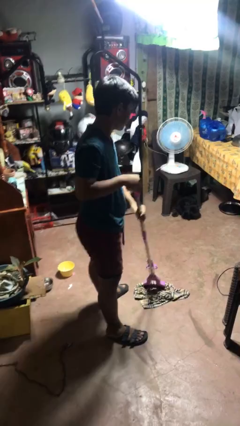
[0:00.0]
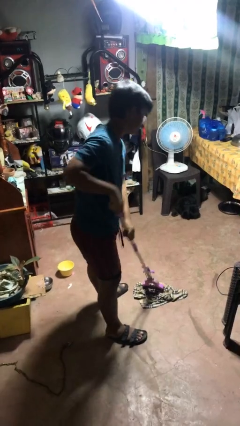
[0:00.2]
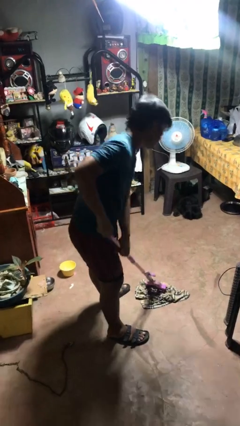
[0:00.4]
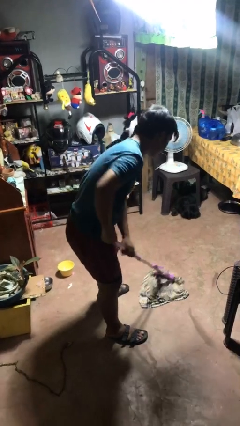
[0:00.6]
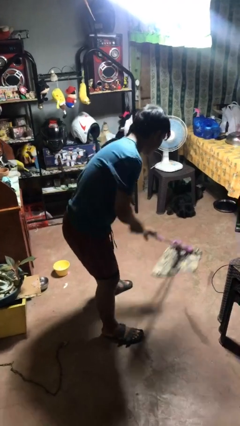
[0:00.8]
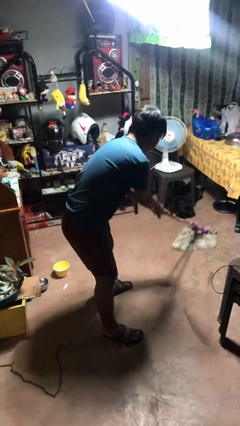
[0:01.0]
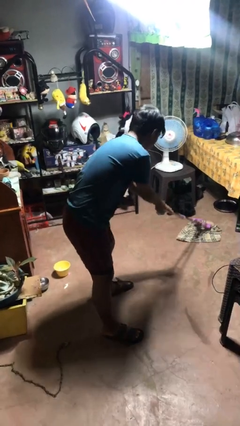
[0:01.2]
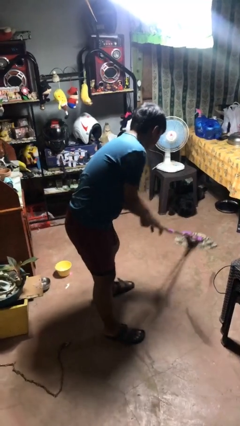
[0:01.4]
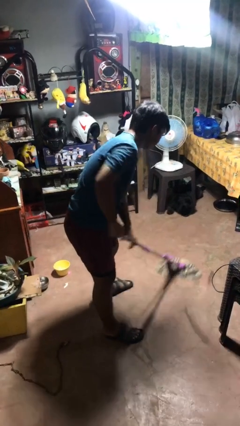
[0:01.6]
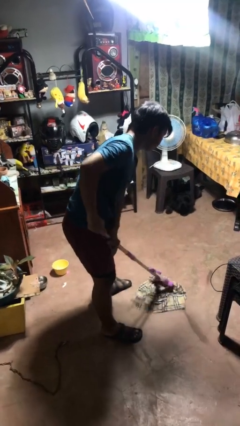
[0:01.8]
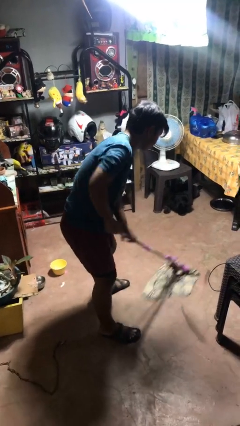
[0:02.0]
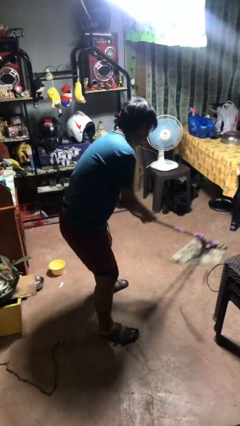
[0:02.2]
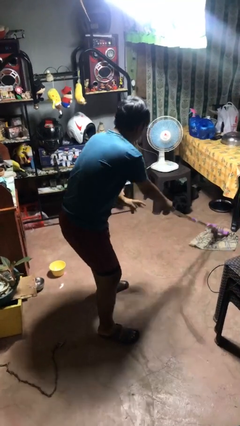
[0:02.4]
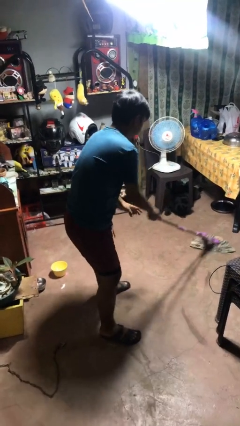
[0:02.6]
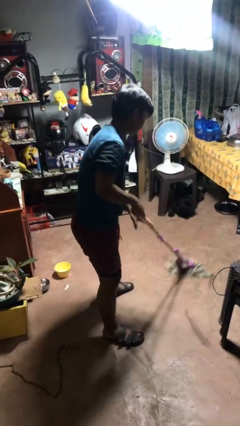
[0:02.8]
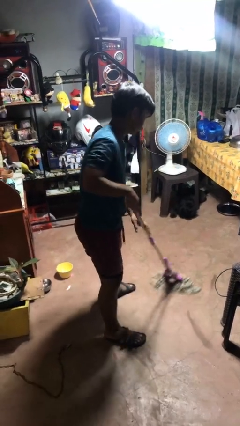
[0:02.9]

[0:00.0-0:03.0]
person mops

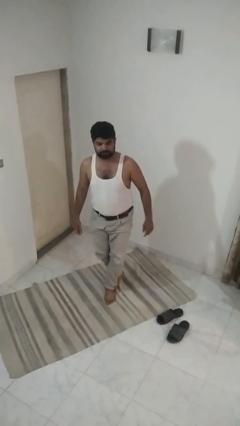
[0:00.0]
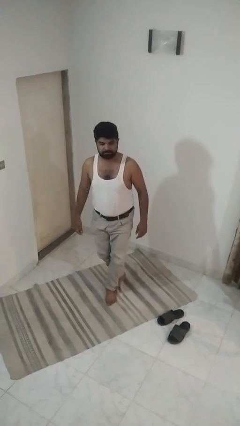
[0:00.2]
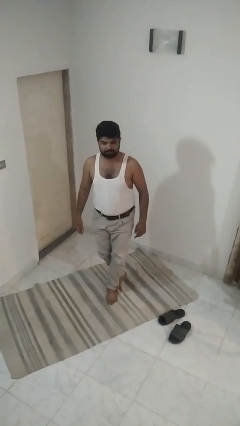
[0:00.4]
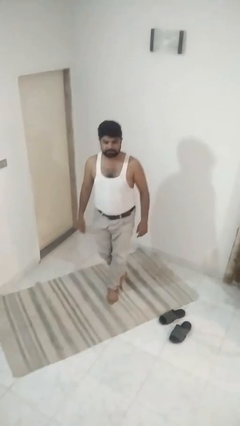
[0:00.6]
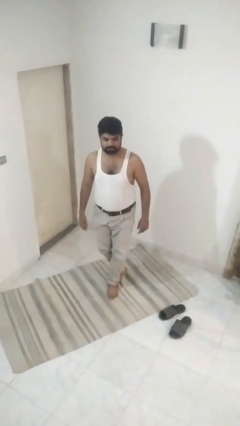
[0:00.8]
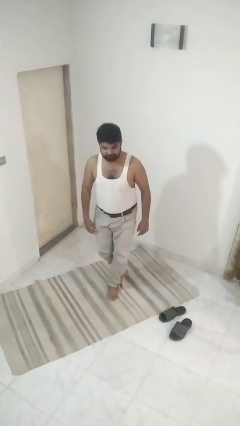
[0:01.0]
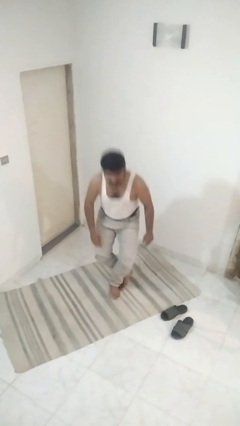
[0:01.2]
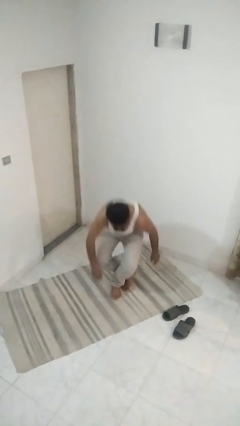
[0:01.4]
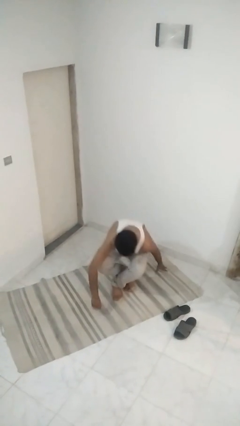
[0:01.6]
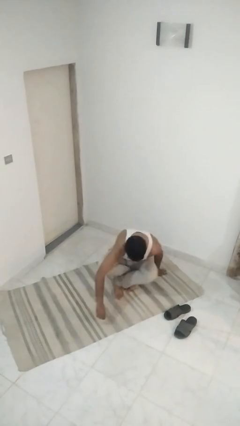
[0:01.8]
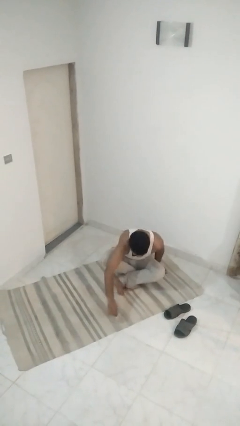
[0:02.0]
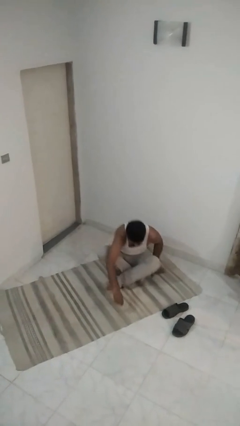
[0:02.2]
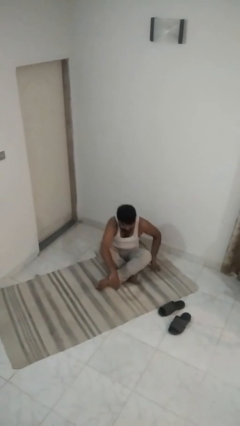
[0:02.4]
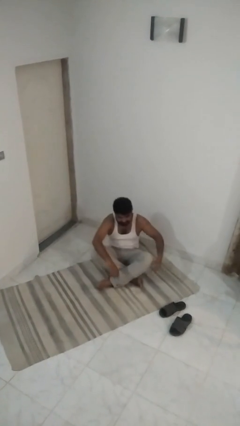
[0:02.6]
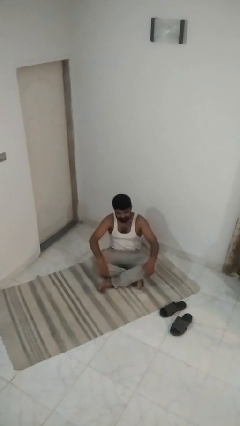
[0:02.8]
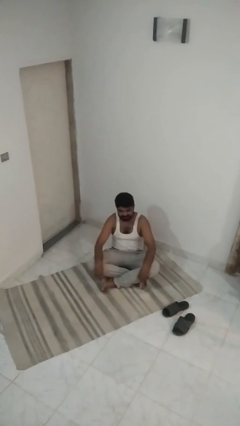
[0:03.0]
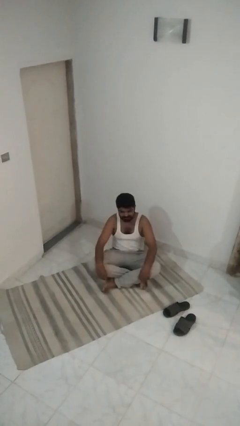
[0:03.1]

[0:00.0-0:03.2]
person sits crisscross

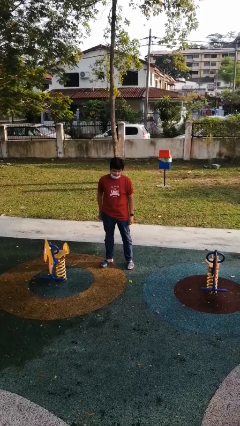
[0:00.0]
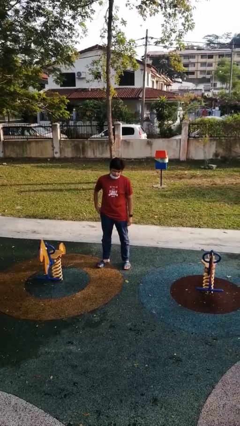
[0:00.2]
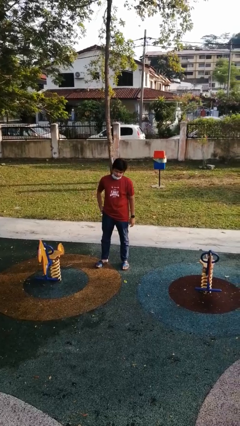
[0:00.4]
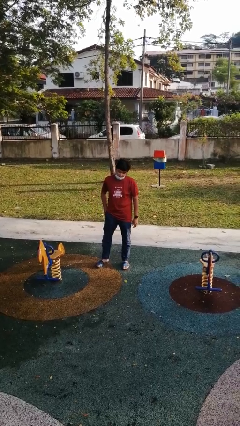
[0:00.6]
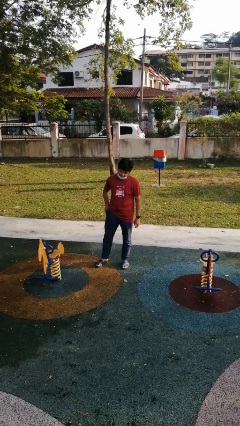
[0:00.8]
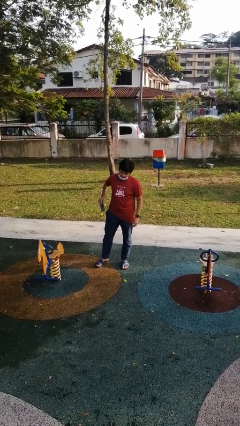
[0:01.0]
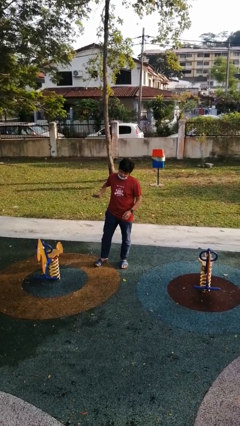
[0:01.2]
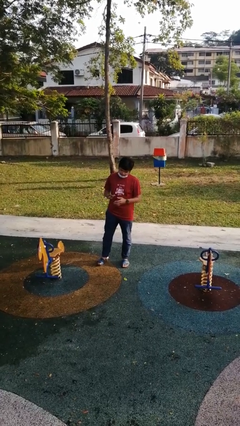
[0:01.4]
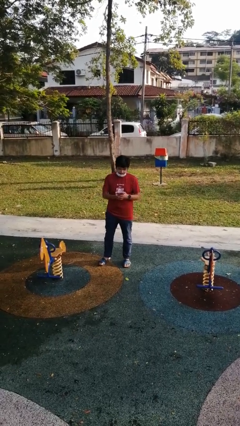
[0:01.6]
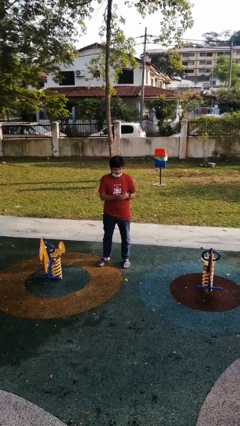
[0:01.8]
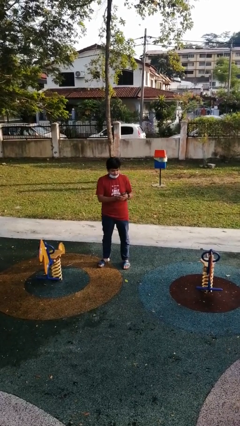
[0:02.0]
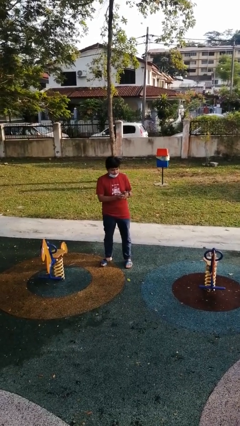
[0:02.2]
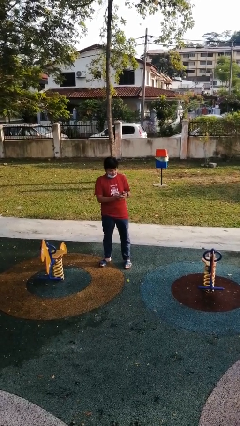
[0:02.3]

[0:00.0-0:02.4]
person takes phone from pocket

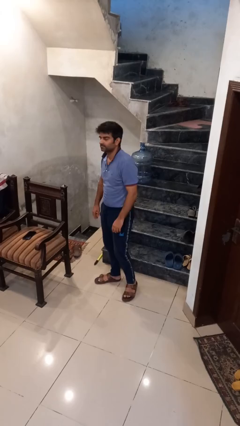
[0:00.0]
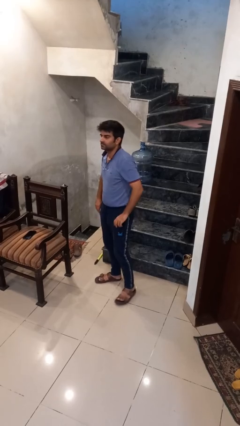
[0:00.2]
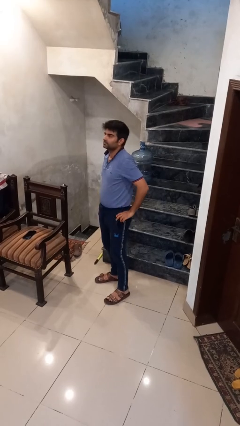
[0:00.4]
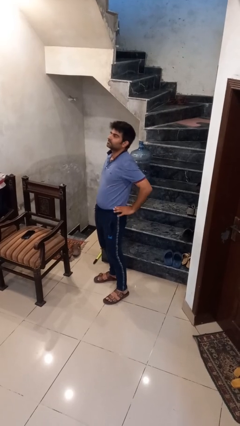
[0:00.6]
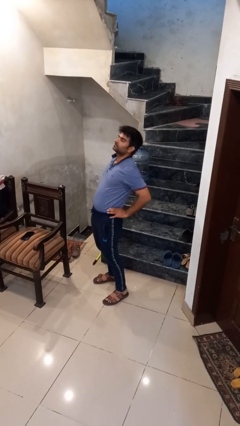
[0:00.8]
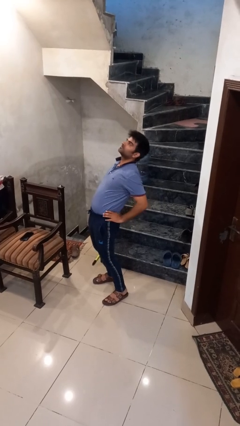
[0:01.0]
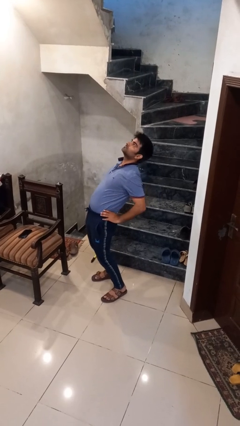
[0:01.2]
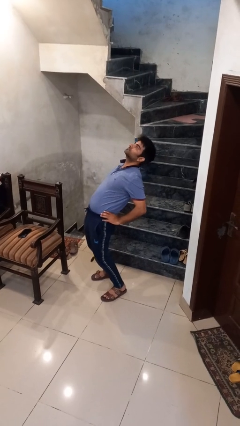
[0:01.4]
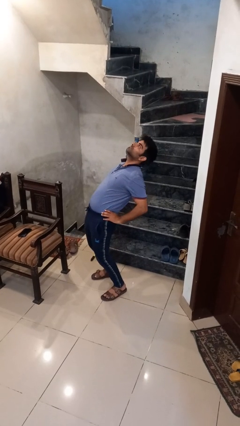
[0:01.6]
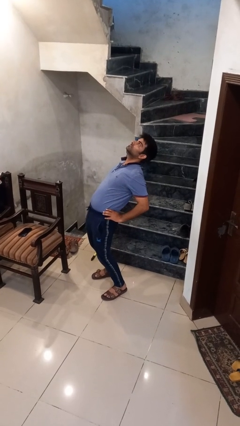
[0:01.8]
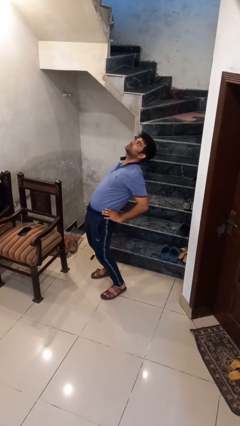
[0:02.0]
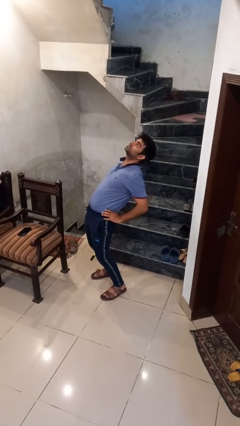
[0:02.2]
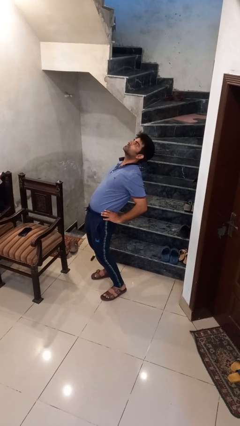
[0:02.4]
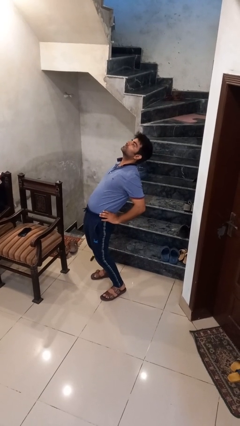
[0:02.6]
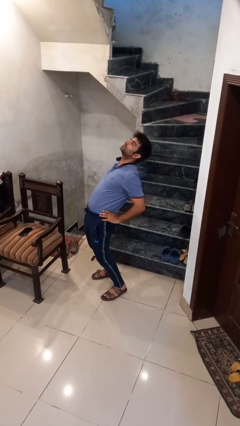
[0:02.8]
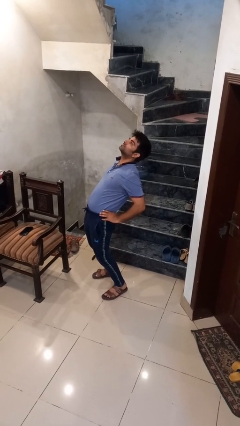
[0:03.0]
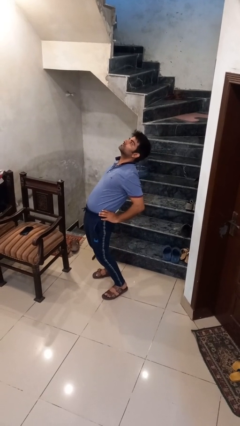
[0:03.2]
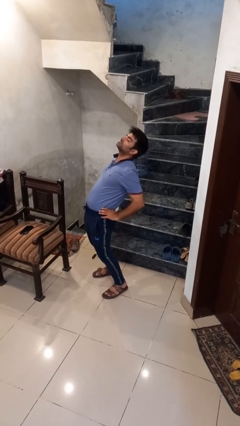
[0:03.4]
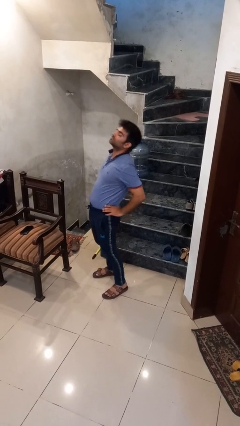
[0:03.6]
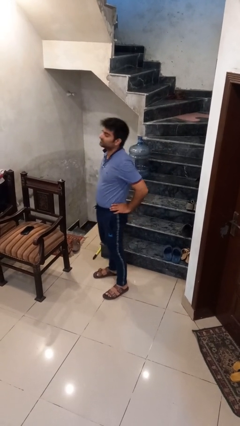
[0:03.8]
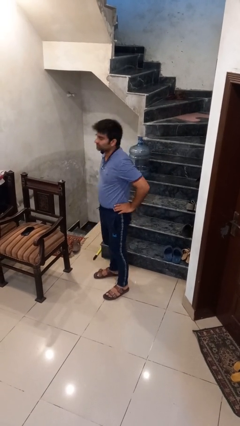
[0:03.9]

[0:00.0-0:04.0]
person stretches back

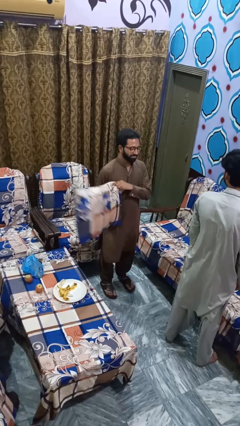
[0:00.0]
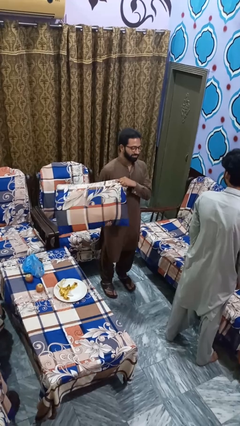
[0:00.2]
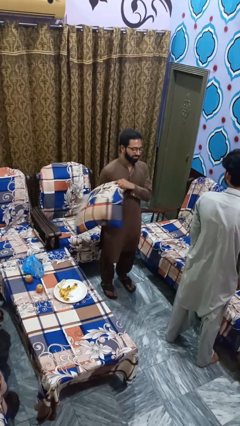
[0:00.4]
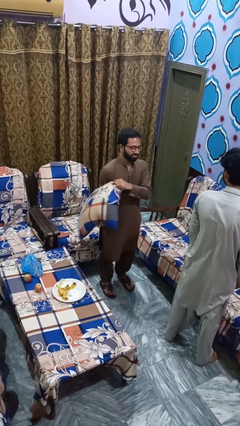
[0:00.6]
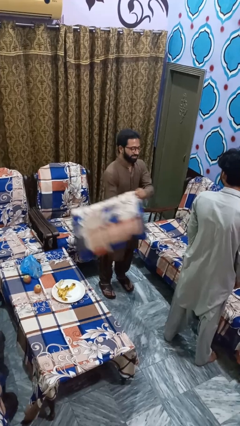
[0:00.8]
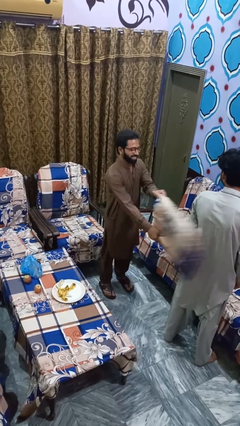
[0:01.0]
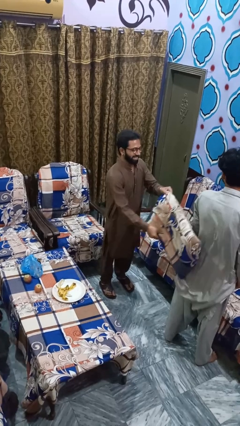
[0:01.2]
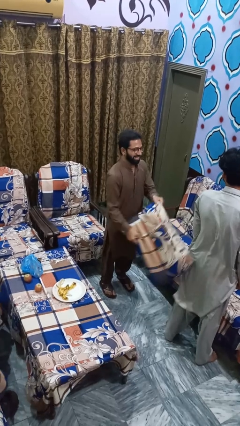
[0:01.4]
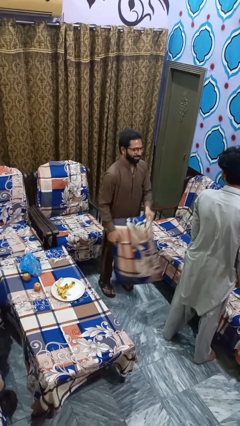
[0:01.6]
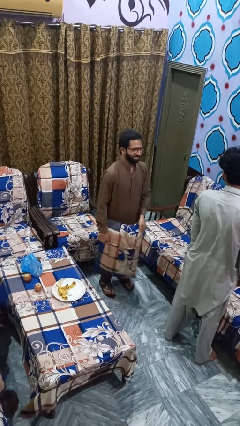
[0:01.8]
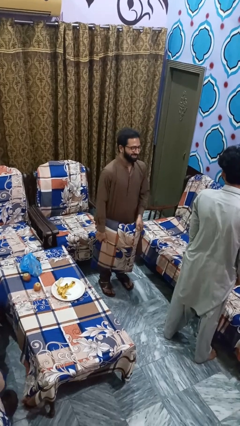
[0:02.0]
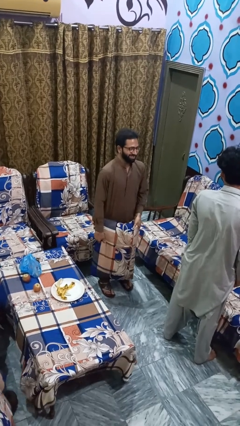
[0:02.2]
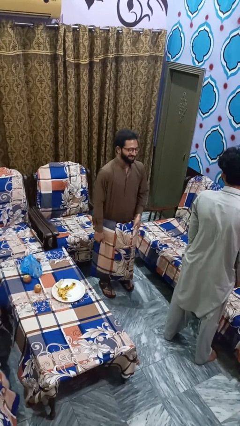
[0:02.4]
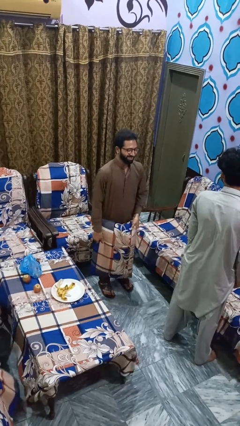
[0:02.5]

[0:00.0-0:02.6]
person hits person with pillow

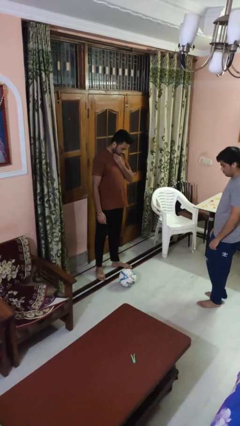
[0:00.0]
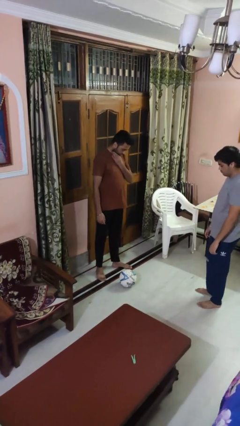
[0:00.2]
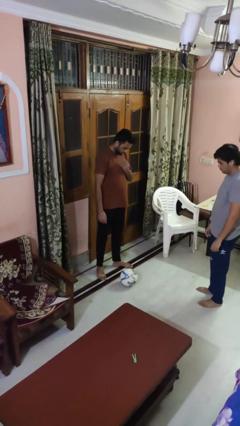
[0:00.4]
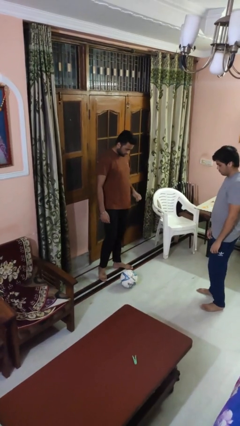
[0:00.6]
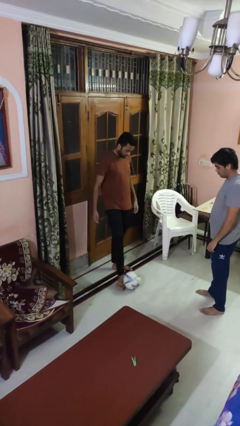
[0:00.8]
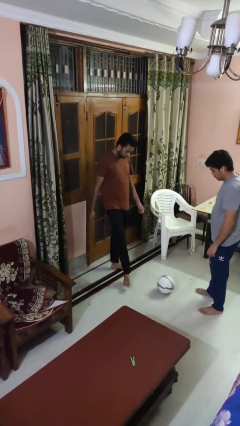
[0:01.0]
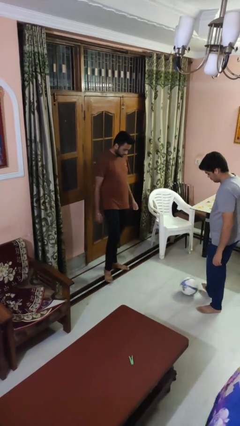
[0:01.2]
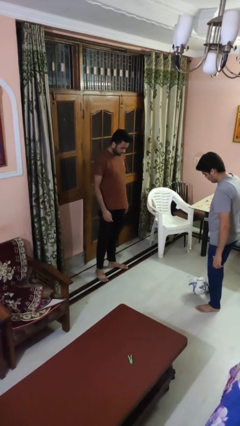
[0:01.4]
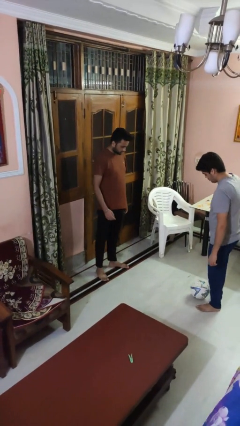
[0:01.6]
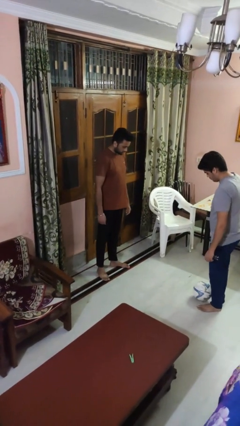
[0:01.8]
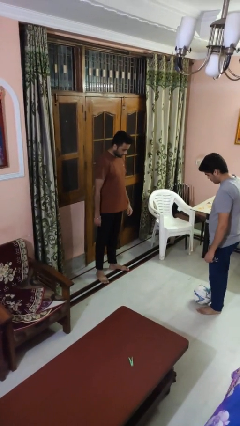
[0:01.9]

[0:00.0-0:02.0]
person kicks object to person
